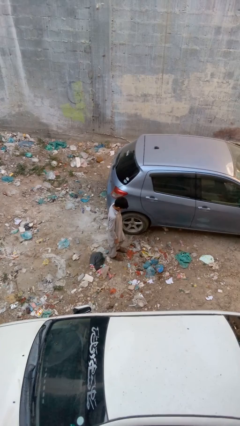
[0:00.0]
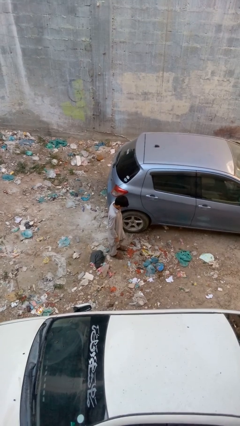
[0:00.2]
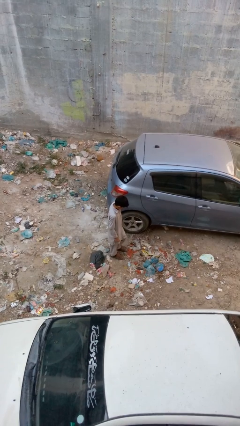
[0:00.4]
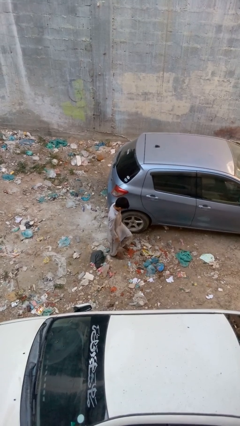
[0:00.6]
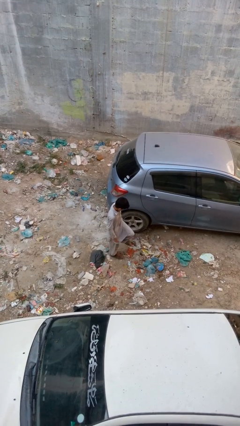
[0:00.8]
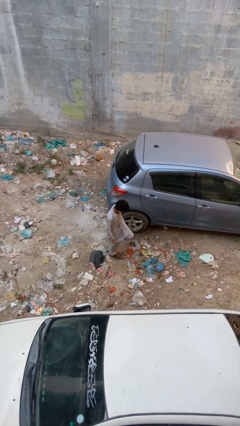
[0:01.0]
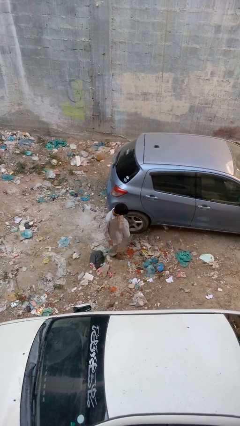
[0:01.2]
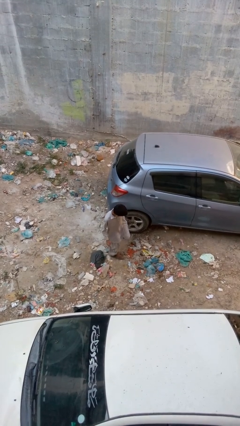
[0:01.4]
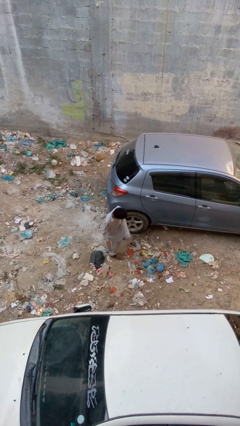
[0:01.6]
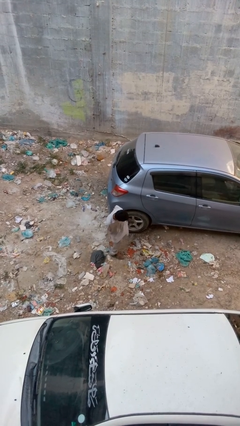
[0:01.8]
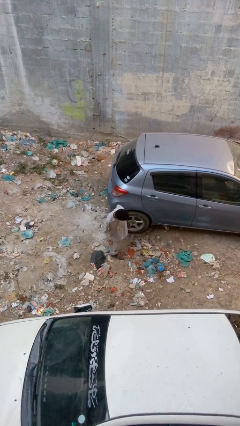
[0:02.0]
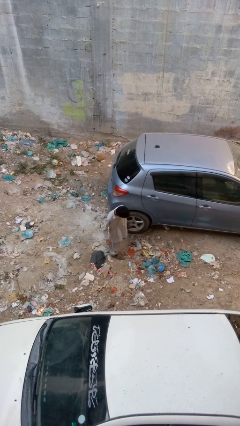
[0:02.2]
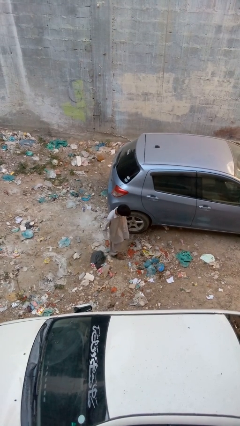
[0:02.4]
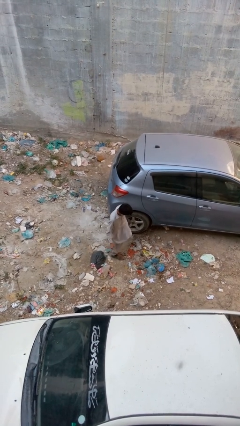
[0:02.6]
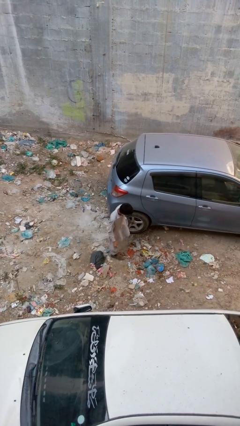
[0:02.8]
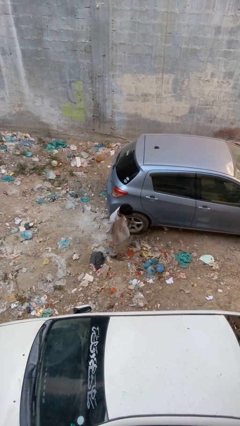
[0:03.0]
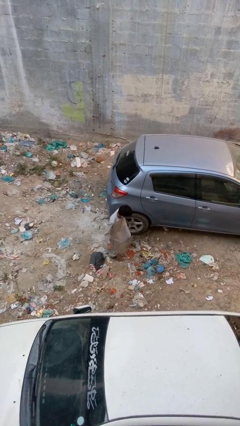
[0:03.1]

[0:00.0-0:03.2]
person kicks car tires

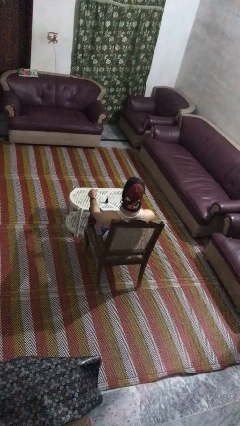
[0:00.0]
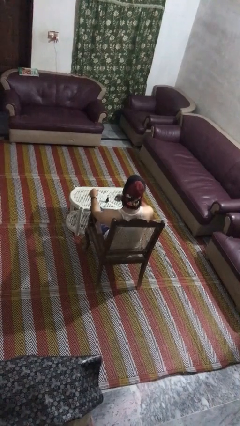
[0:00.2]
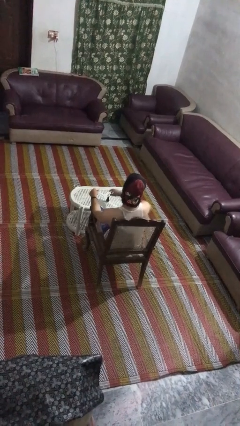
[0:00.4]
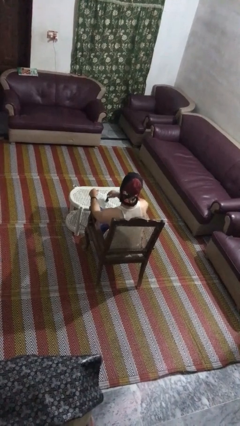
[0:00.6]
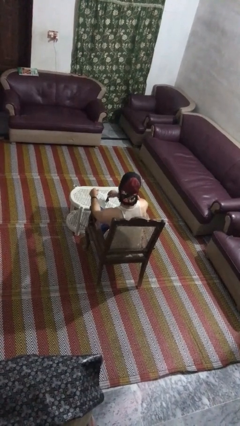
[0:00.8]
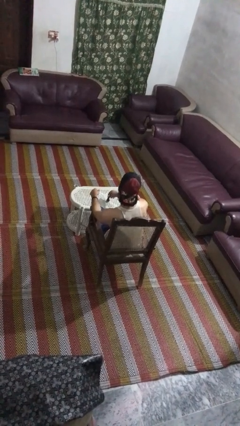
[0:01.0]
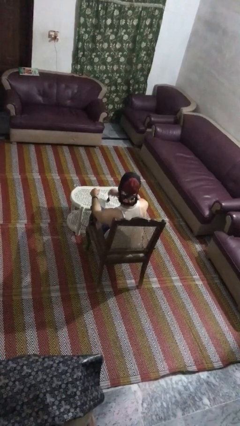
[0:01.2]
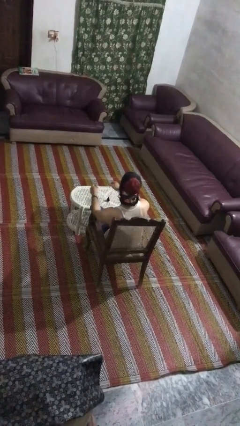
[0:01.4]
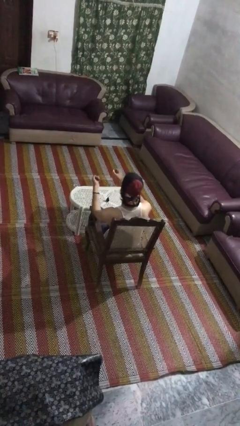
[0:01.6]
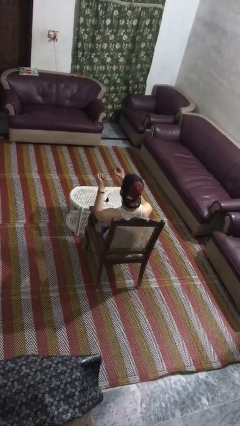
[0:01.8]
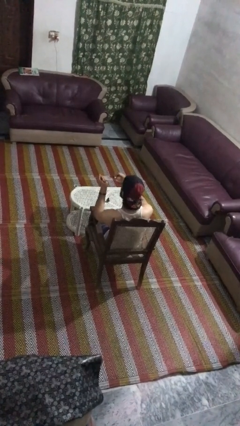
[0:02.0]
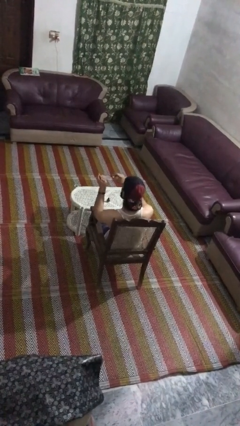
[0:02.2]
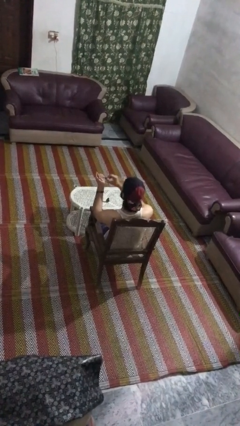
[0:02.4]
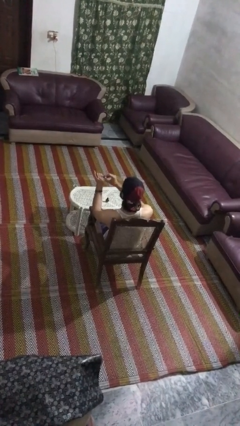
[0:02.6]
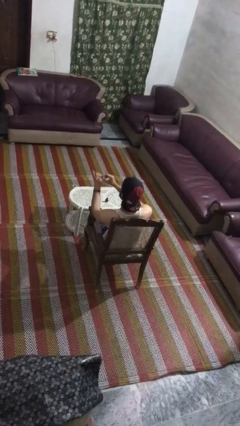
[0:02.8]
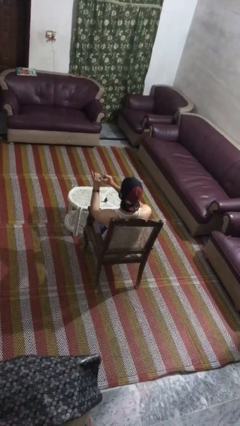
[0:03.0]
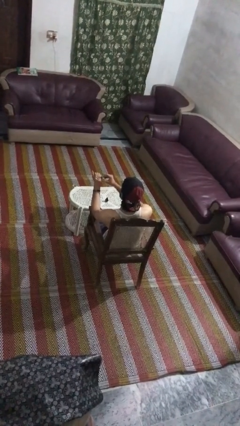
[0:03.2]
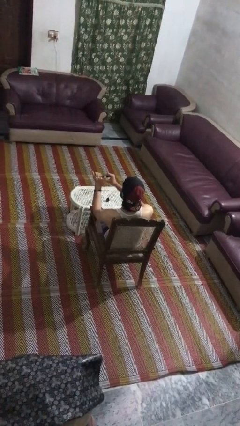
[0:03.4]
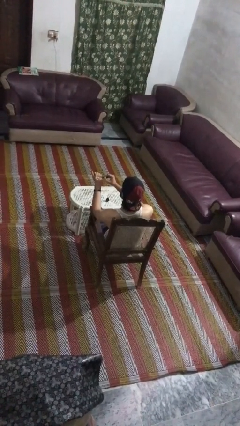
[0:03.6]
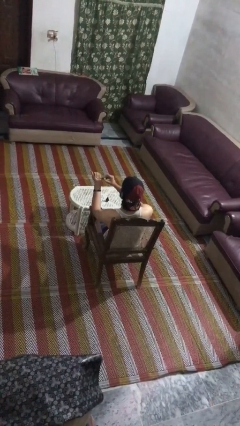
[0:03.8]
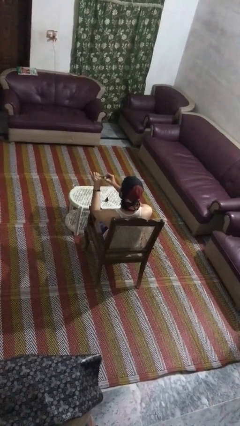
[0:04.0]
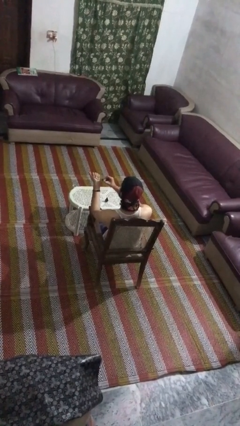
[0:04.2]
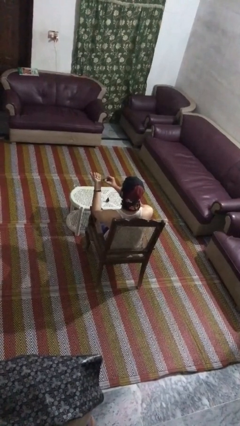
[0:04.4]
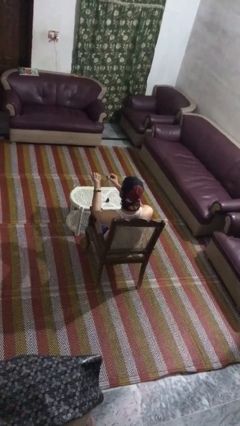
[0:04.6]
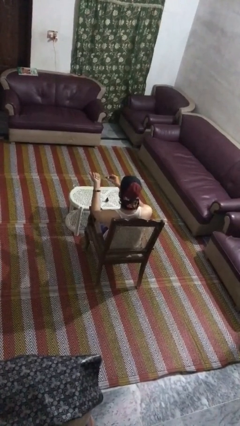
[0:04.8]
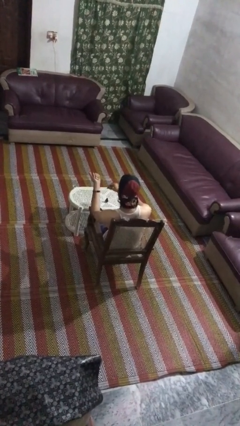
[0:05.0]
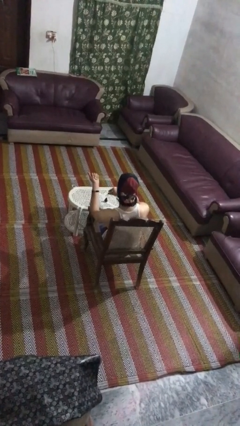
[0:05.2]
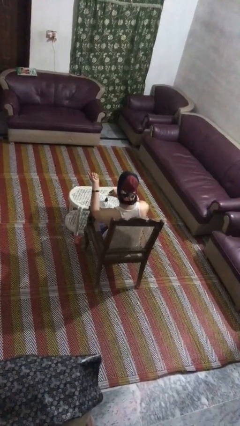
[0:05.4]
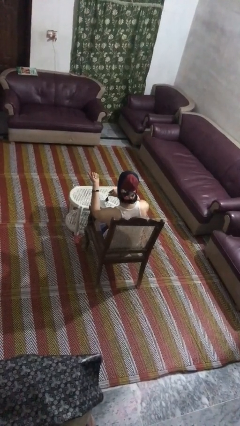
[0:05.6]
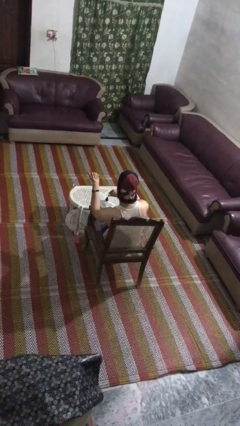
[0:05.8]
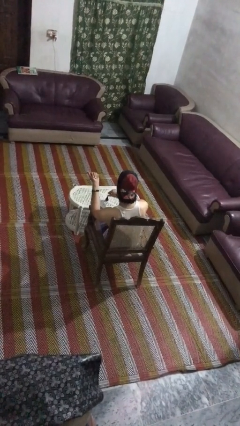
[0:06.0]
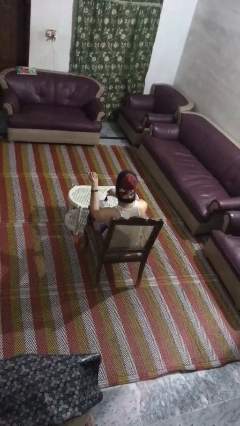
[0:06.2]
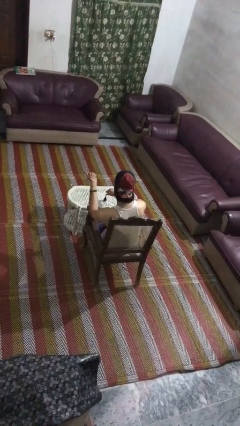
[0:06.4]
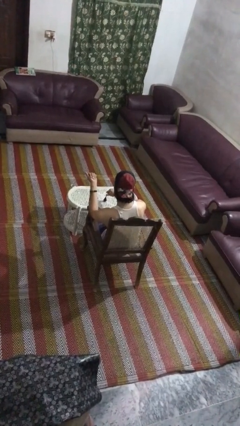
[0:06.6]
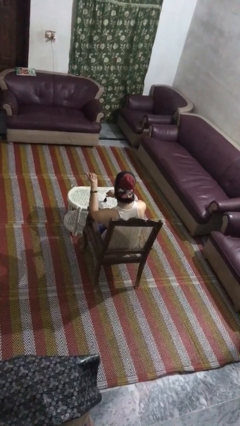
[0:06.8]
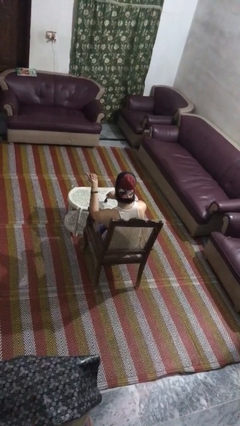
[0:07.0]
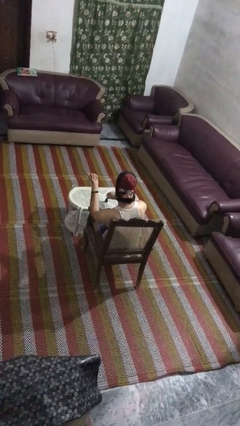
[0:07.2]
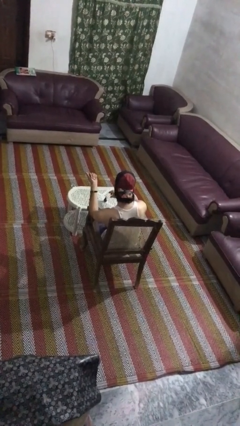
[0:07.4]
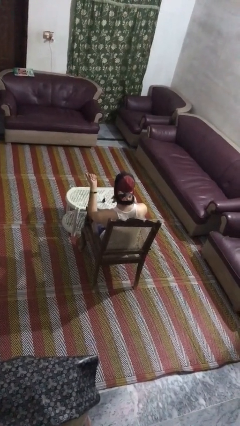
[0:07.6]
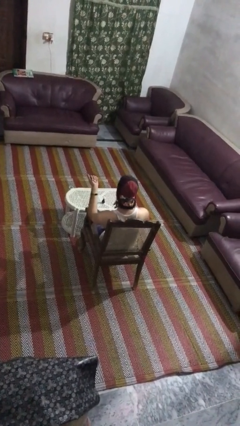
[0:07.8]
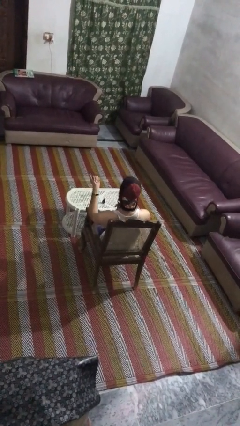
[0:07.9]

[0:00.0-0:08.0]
person paints fingernails

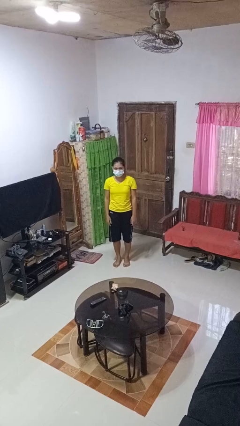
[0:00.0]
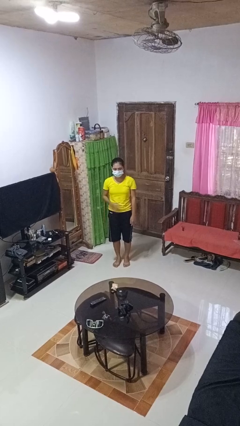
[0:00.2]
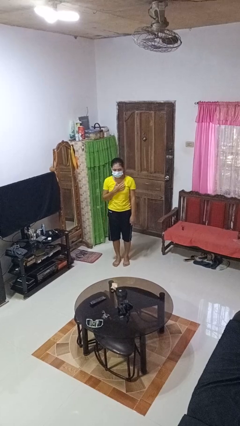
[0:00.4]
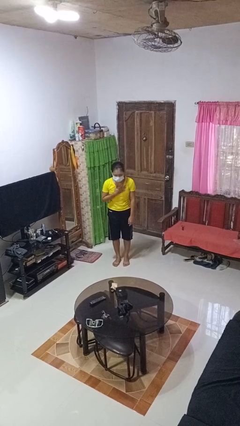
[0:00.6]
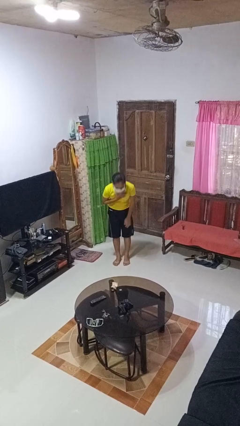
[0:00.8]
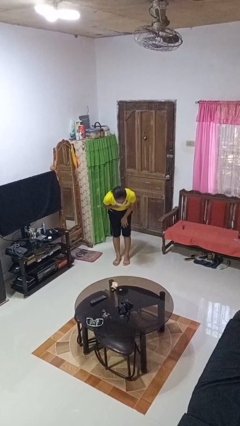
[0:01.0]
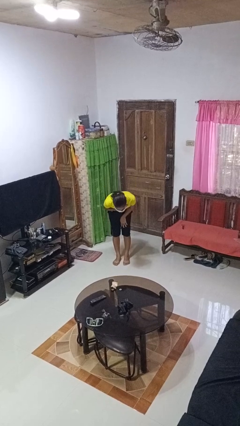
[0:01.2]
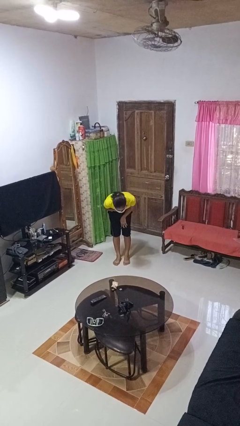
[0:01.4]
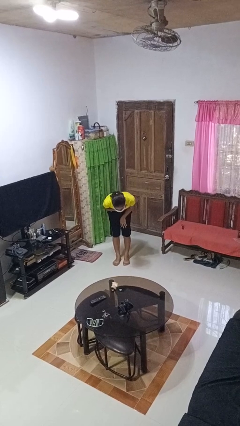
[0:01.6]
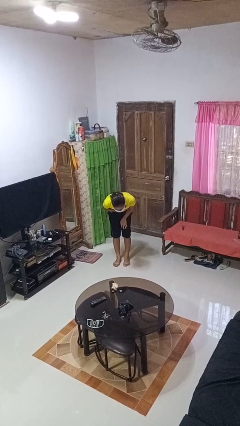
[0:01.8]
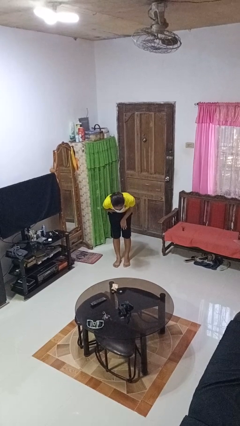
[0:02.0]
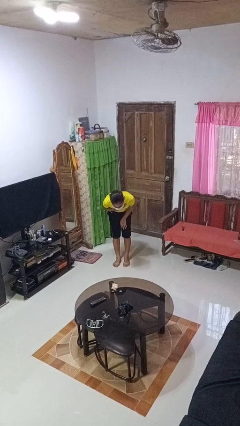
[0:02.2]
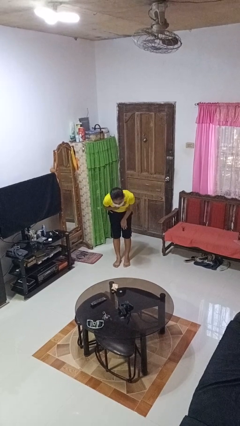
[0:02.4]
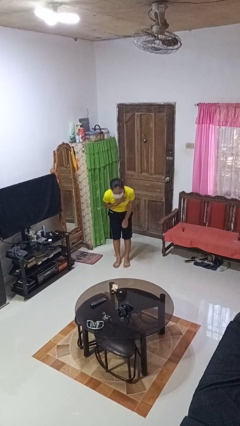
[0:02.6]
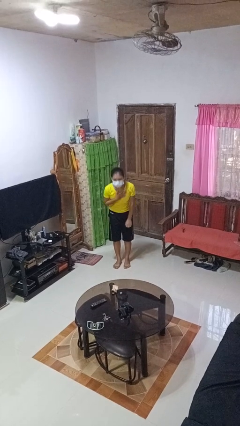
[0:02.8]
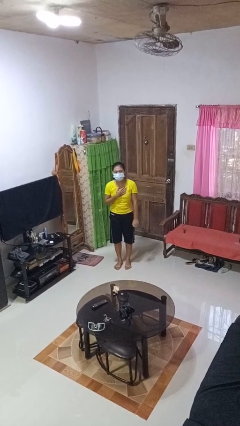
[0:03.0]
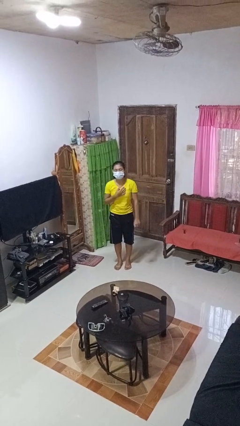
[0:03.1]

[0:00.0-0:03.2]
person bows

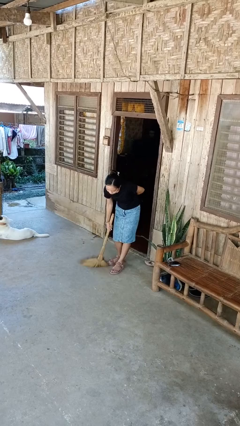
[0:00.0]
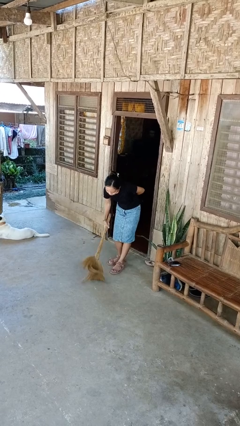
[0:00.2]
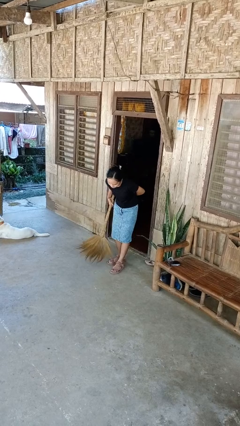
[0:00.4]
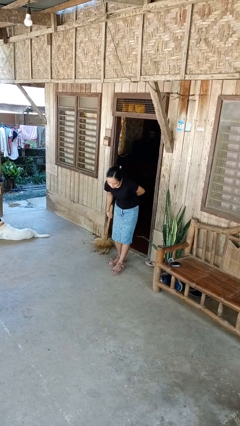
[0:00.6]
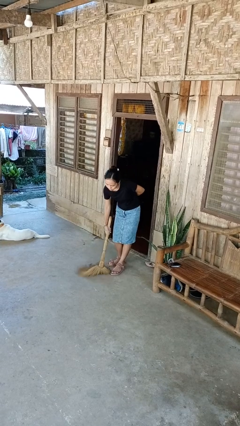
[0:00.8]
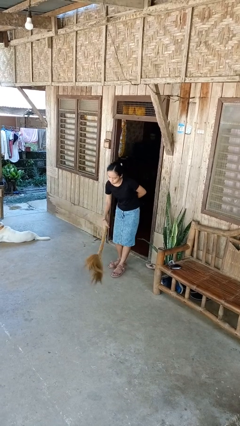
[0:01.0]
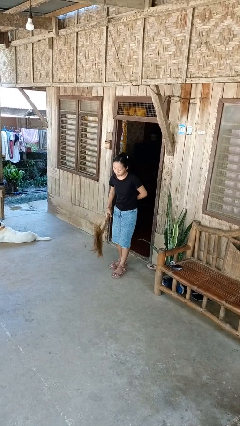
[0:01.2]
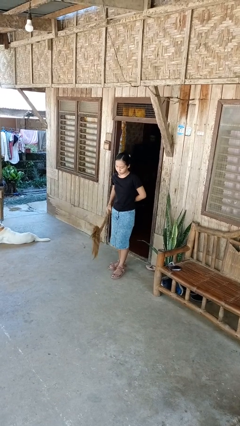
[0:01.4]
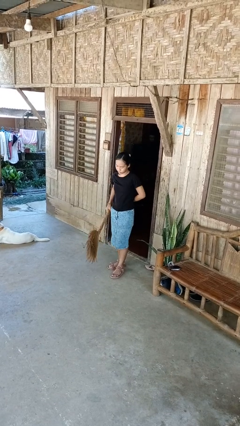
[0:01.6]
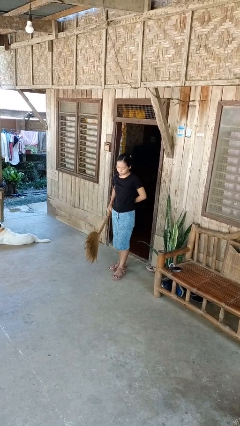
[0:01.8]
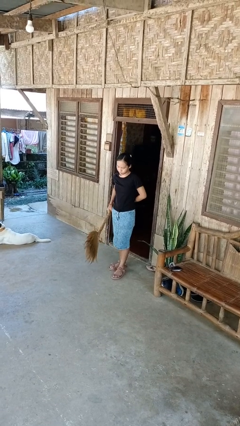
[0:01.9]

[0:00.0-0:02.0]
person sweeps floor

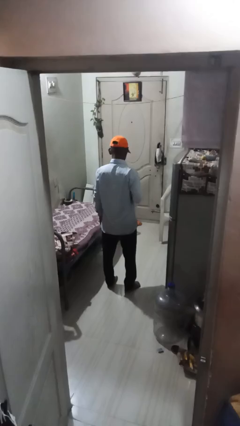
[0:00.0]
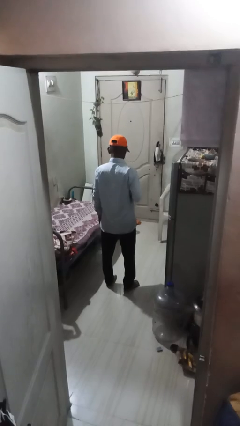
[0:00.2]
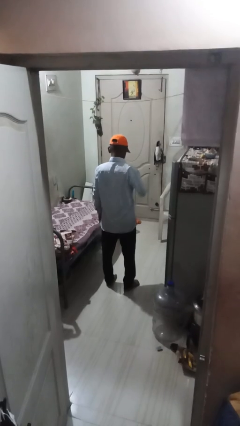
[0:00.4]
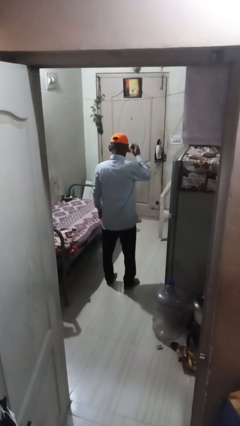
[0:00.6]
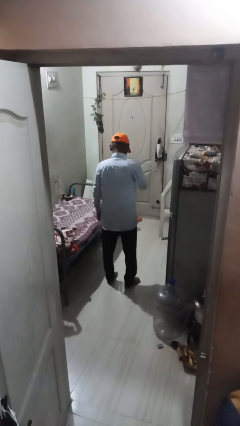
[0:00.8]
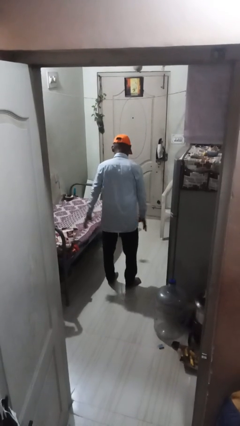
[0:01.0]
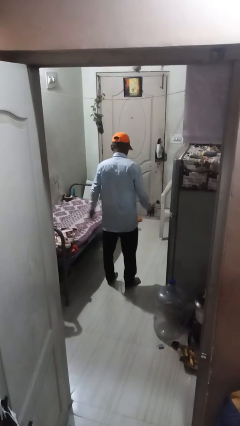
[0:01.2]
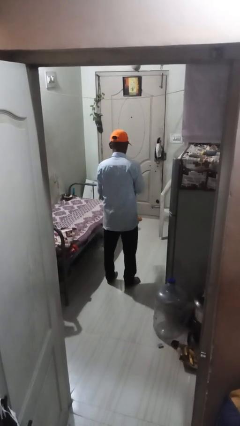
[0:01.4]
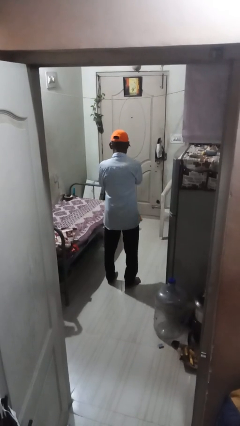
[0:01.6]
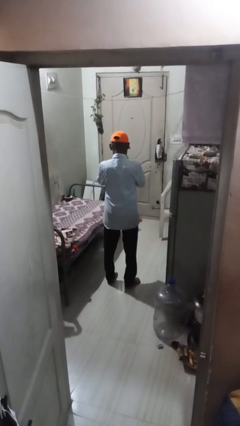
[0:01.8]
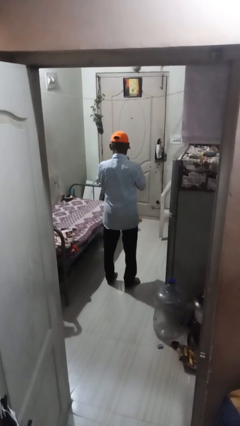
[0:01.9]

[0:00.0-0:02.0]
person bounces ball on floor
